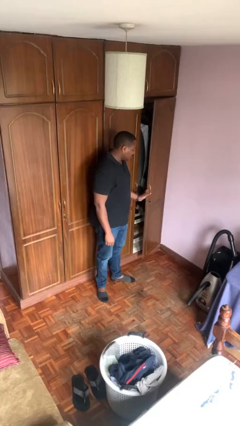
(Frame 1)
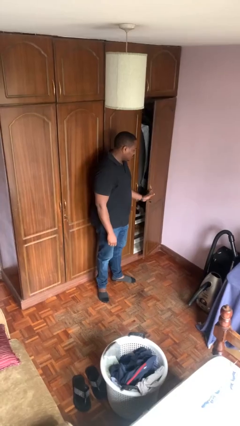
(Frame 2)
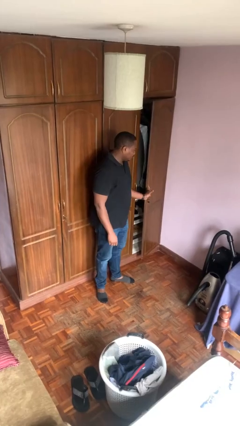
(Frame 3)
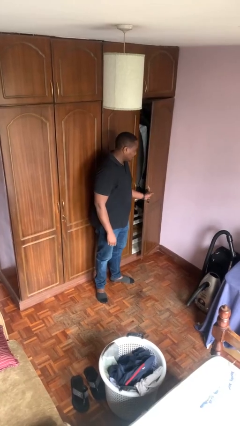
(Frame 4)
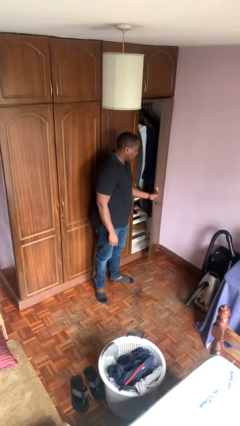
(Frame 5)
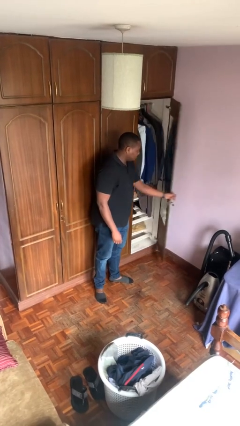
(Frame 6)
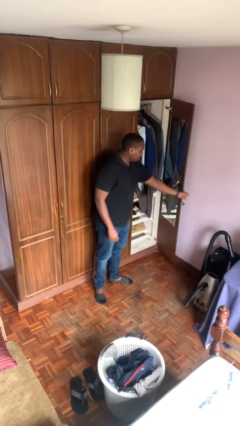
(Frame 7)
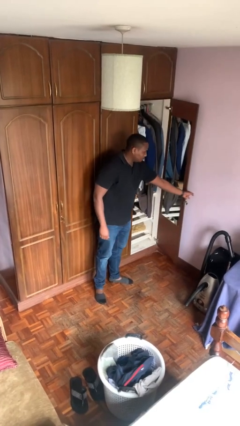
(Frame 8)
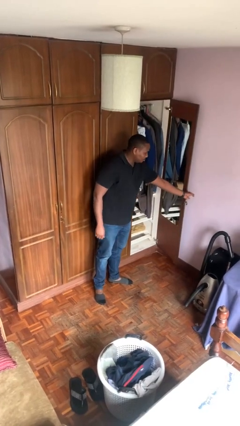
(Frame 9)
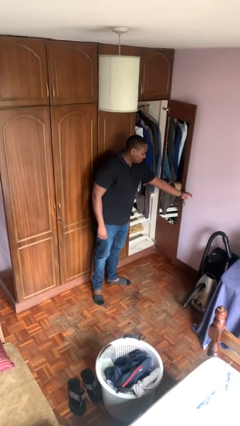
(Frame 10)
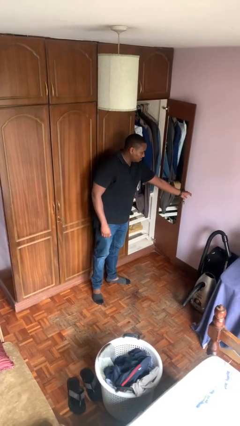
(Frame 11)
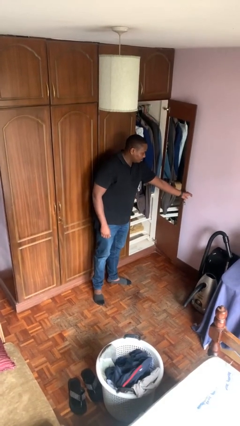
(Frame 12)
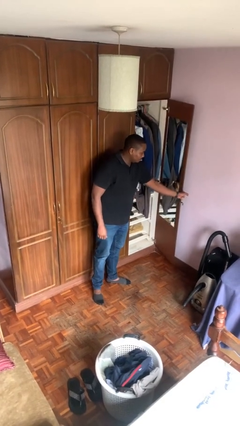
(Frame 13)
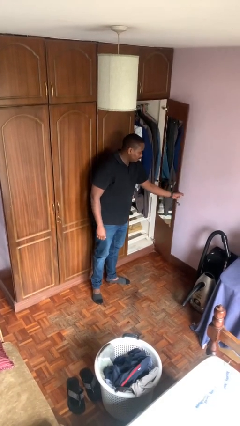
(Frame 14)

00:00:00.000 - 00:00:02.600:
person opens closet door

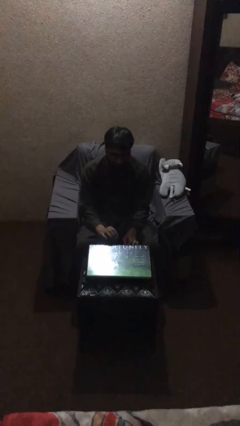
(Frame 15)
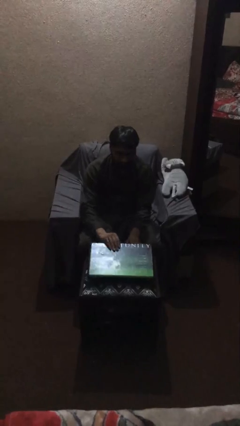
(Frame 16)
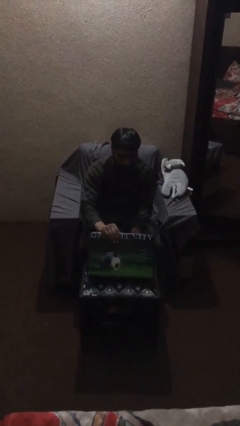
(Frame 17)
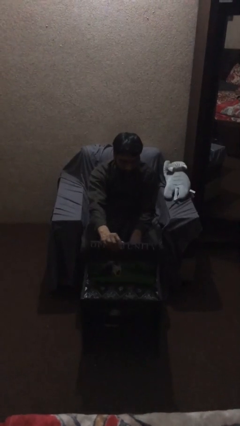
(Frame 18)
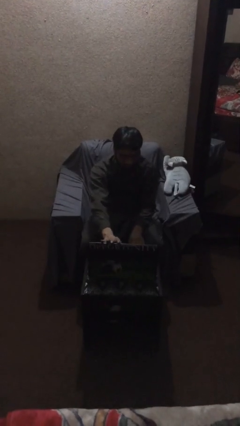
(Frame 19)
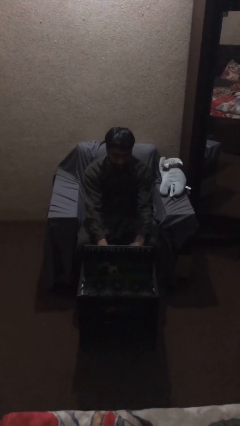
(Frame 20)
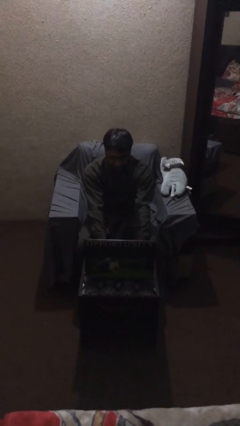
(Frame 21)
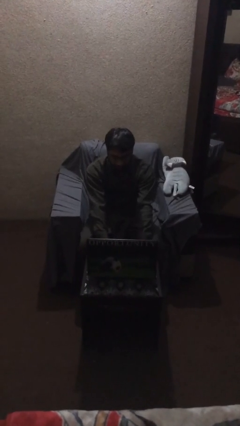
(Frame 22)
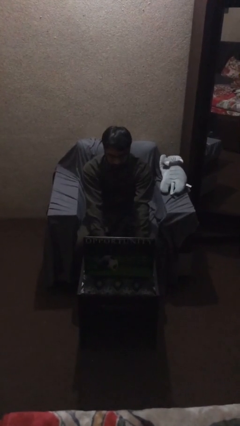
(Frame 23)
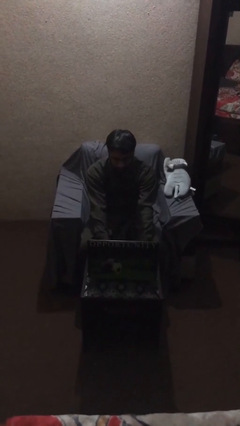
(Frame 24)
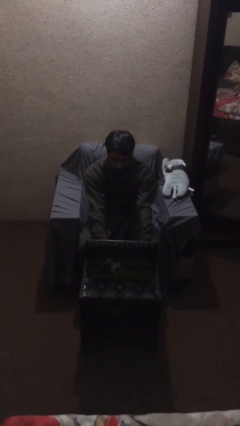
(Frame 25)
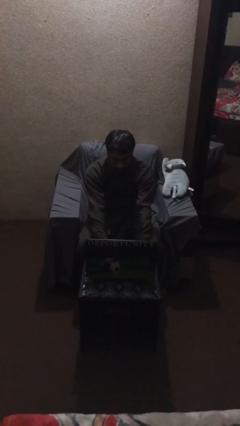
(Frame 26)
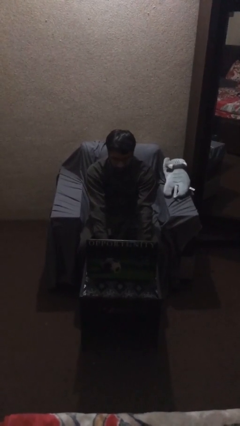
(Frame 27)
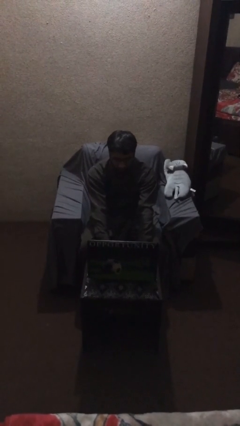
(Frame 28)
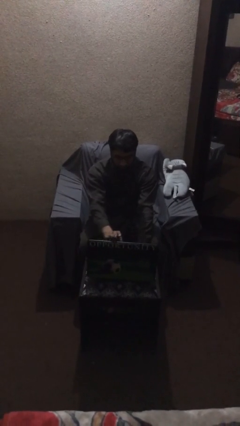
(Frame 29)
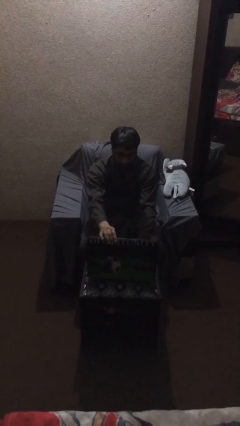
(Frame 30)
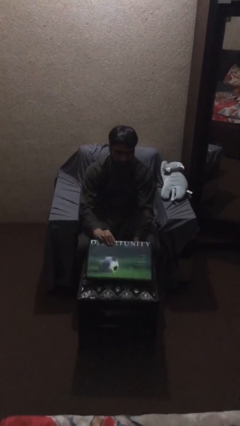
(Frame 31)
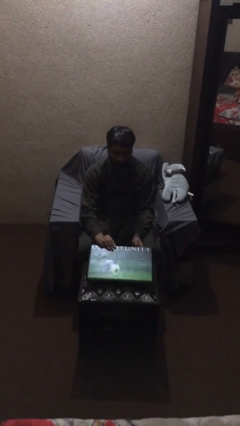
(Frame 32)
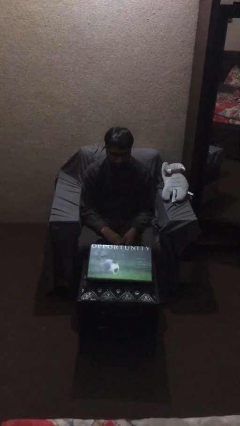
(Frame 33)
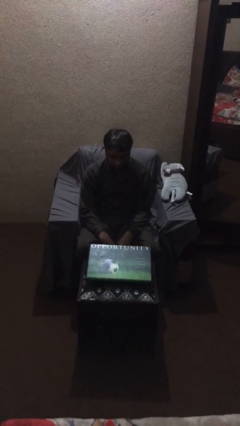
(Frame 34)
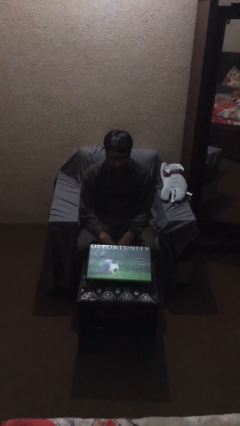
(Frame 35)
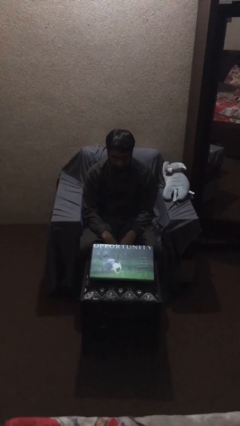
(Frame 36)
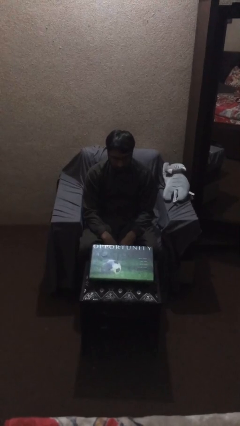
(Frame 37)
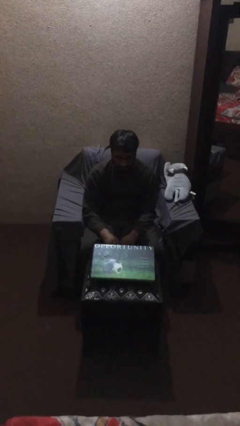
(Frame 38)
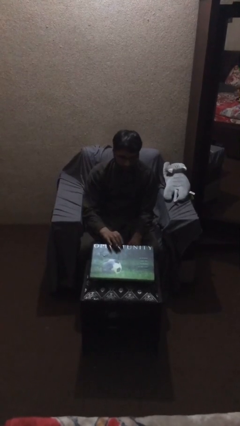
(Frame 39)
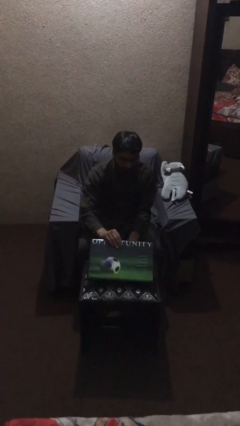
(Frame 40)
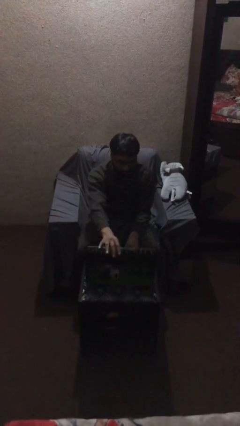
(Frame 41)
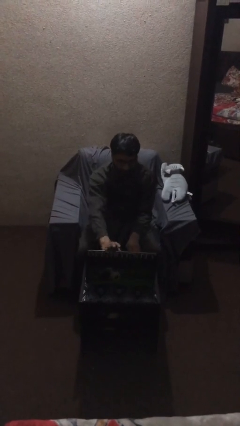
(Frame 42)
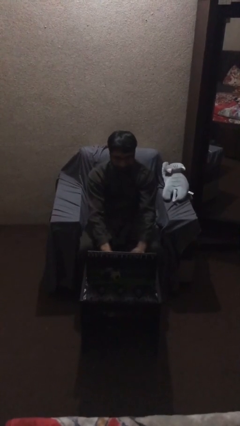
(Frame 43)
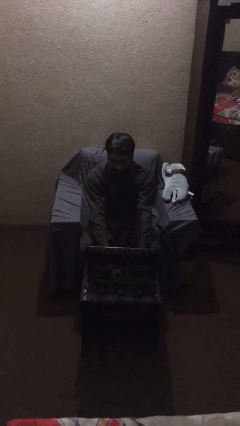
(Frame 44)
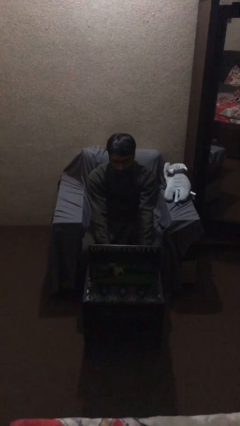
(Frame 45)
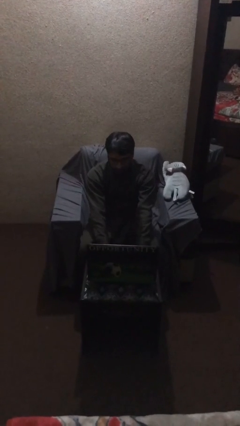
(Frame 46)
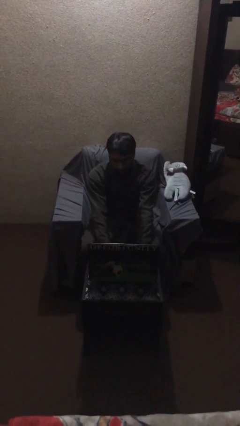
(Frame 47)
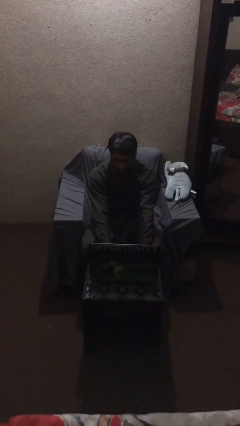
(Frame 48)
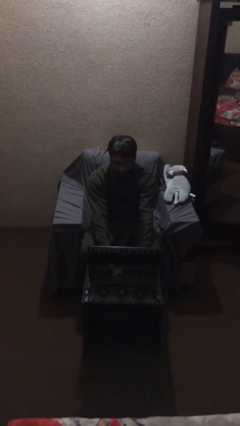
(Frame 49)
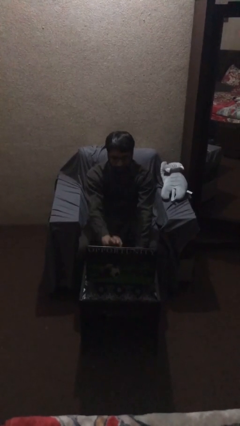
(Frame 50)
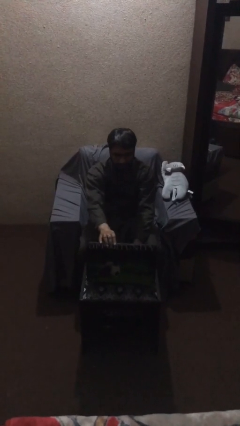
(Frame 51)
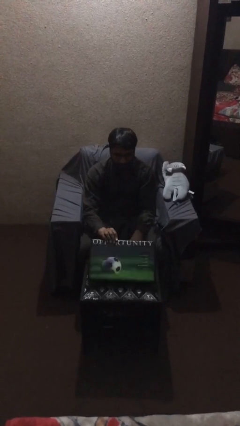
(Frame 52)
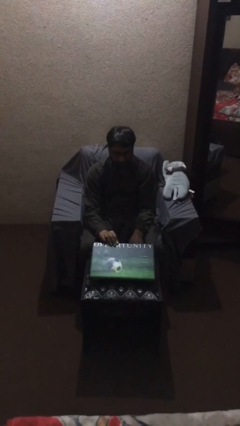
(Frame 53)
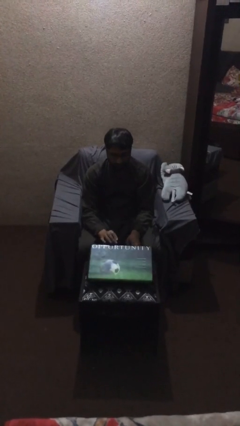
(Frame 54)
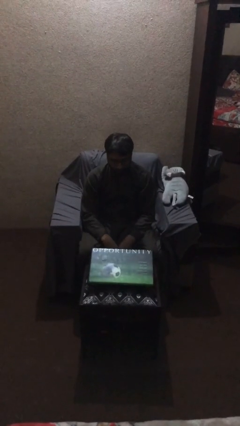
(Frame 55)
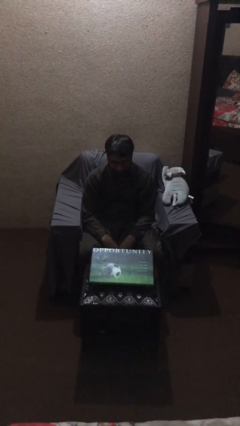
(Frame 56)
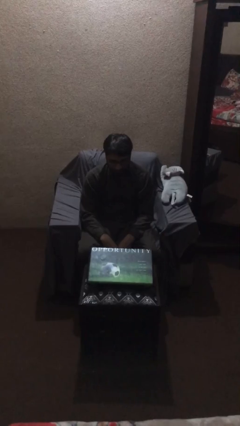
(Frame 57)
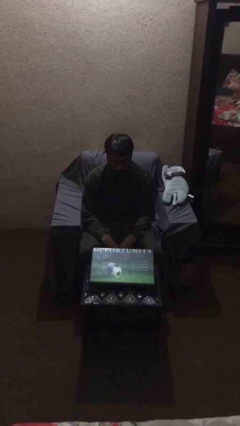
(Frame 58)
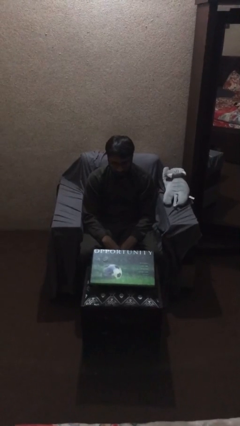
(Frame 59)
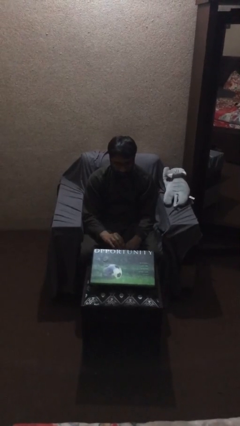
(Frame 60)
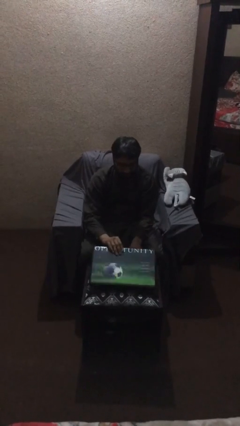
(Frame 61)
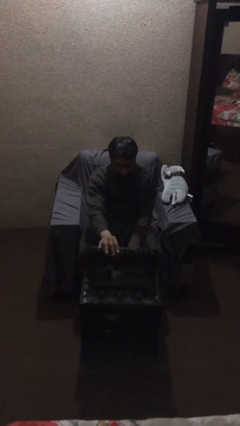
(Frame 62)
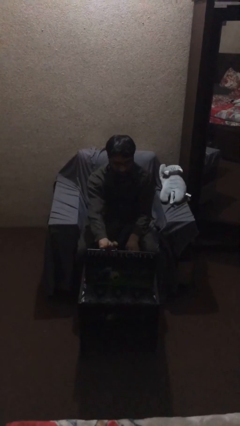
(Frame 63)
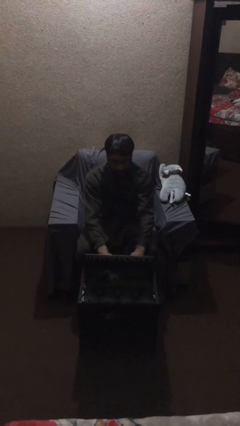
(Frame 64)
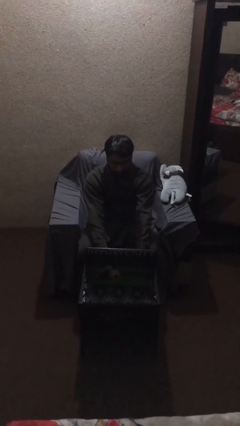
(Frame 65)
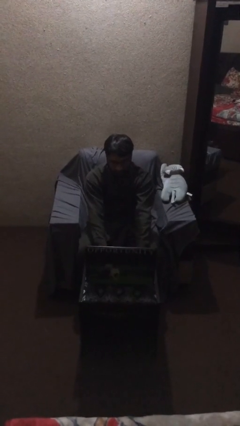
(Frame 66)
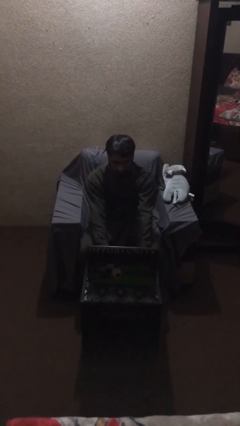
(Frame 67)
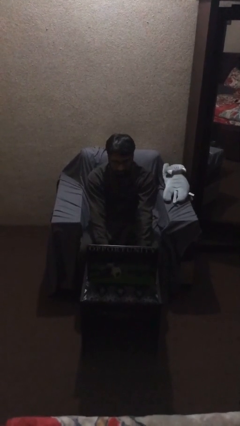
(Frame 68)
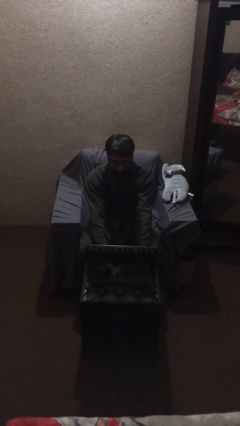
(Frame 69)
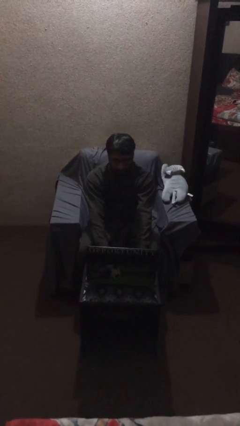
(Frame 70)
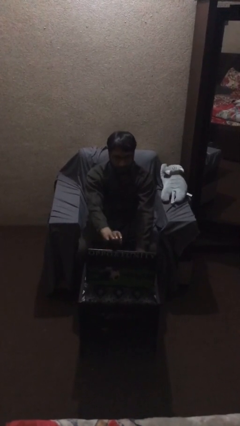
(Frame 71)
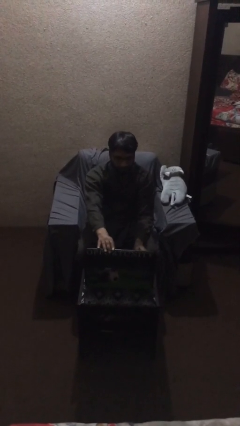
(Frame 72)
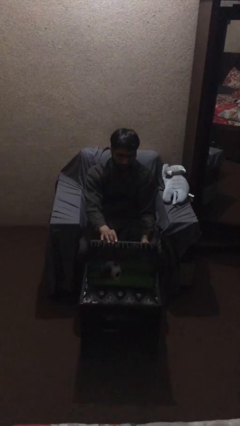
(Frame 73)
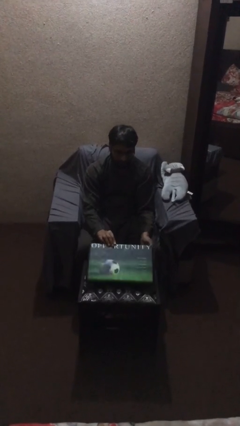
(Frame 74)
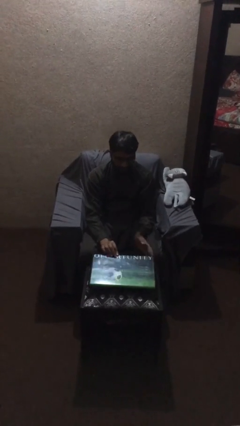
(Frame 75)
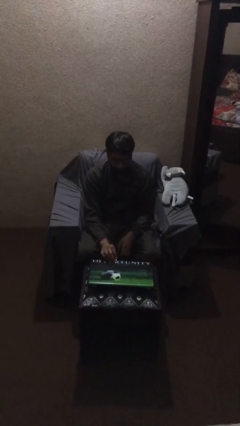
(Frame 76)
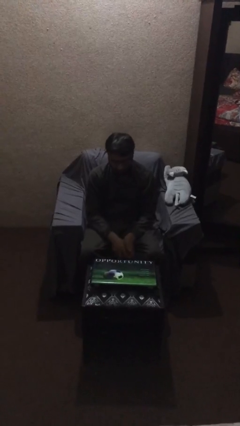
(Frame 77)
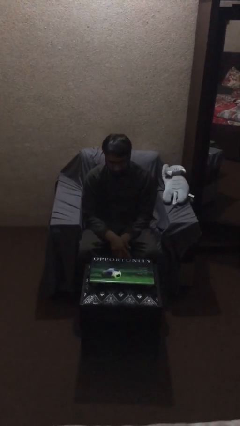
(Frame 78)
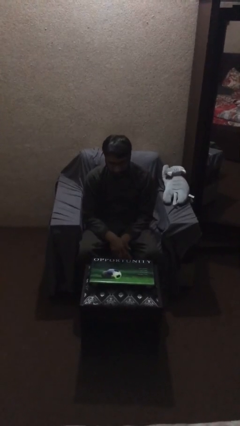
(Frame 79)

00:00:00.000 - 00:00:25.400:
person interacts with laptop

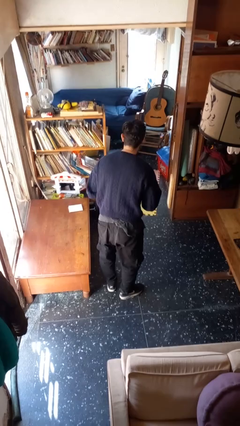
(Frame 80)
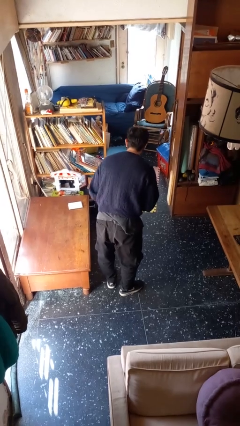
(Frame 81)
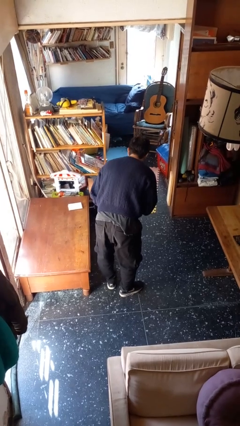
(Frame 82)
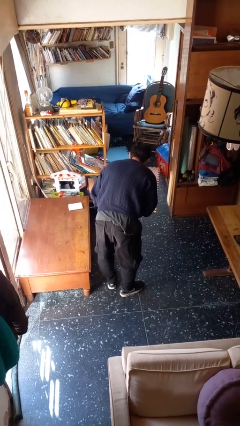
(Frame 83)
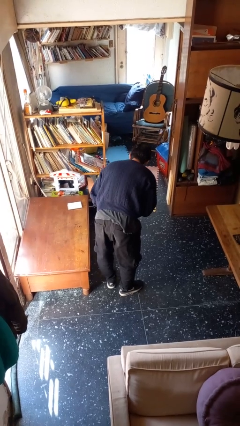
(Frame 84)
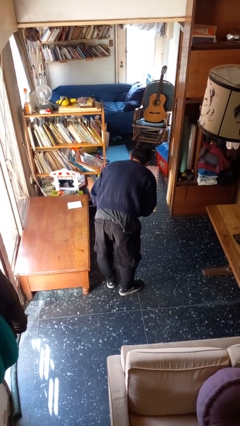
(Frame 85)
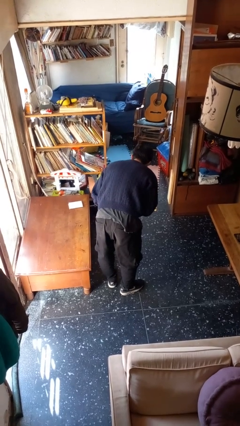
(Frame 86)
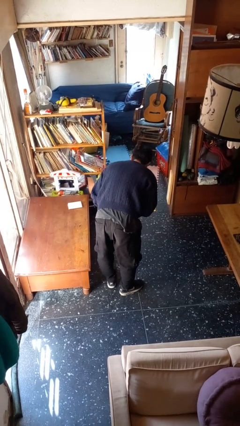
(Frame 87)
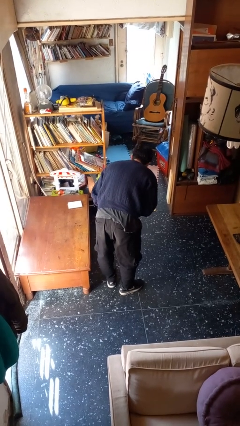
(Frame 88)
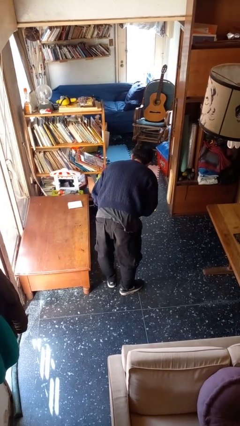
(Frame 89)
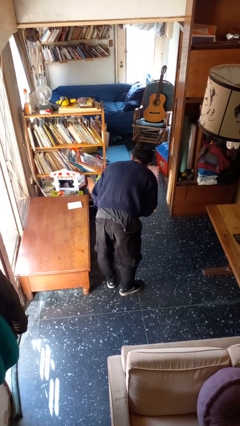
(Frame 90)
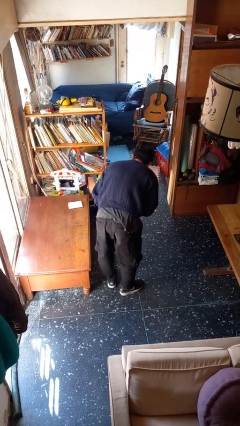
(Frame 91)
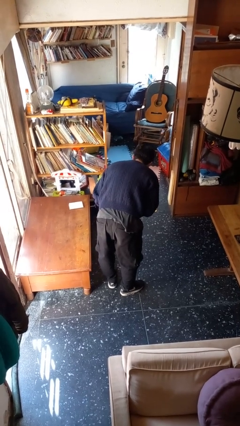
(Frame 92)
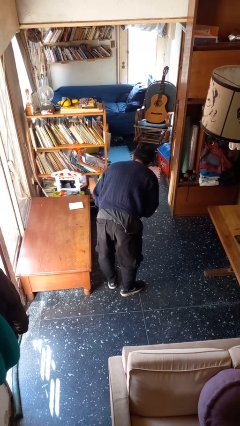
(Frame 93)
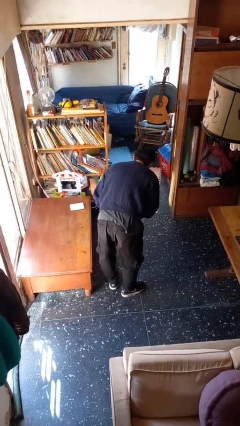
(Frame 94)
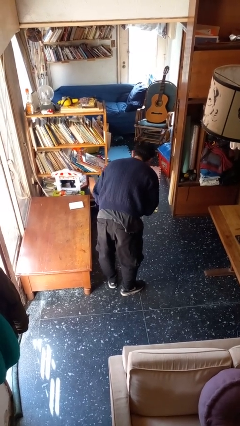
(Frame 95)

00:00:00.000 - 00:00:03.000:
person bows

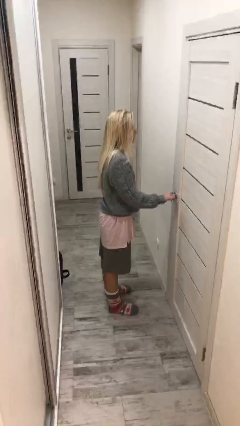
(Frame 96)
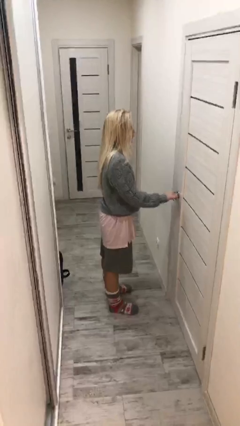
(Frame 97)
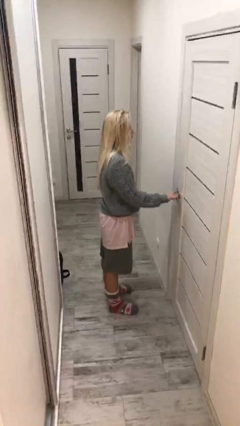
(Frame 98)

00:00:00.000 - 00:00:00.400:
person closes facility door
